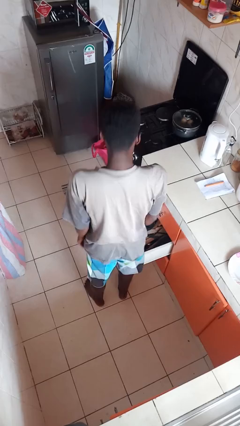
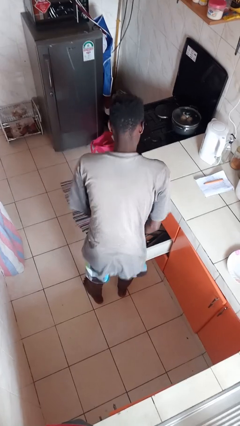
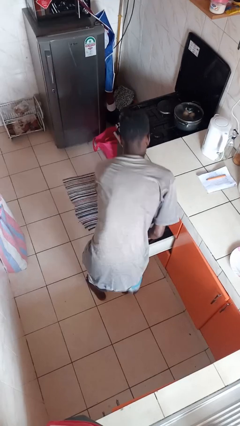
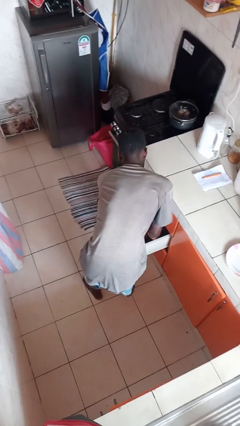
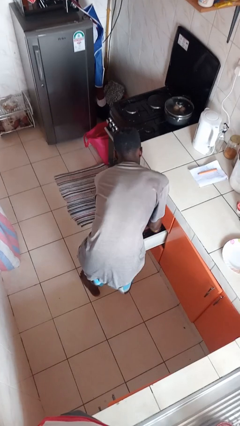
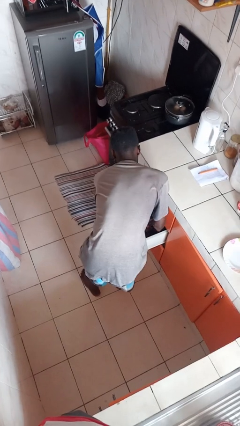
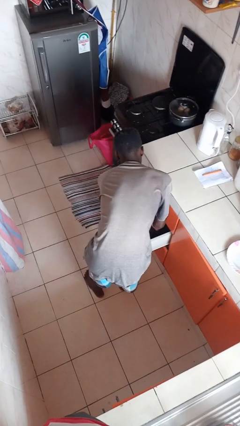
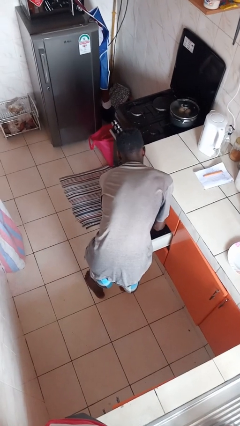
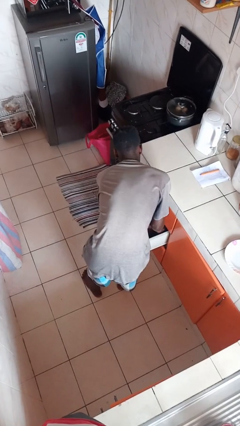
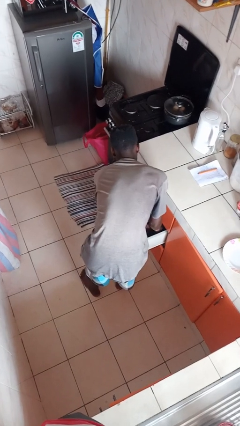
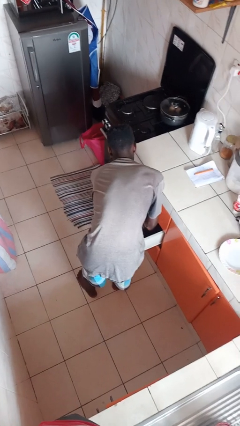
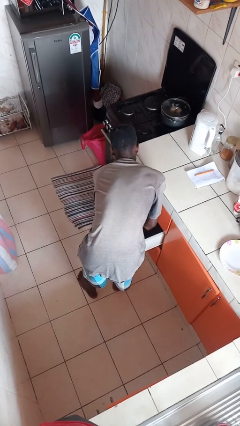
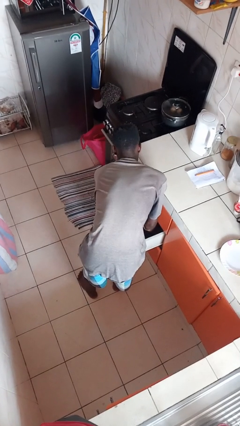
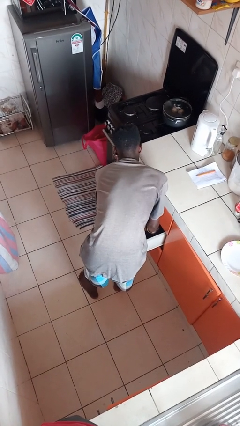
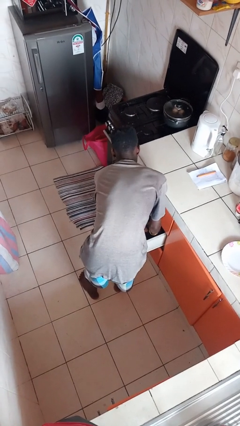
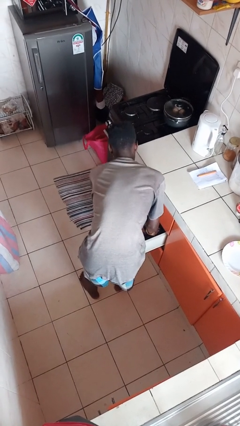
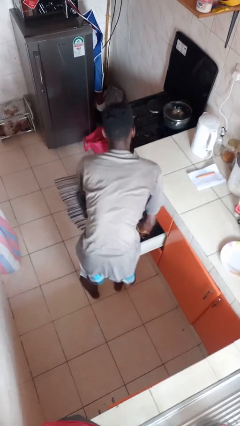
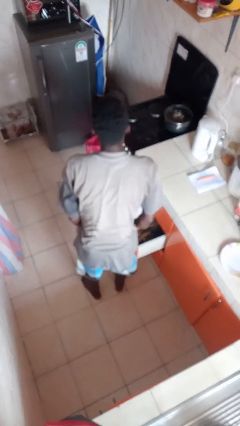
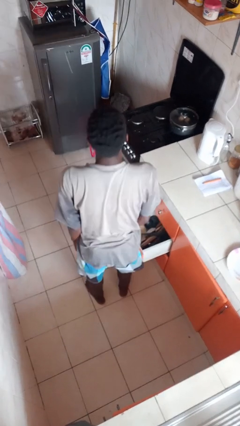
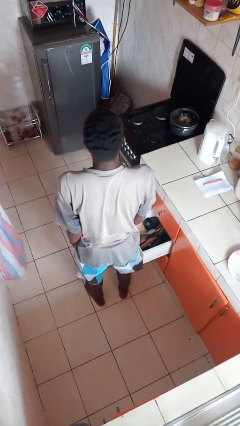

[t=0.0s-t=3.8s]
person searches in kitchen drawer

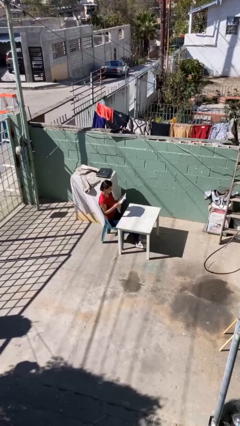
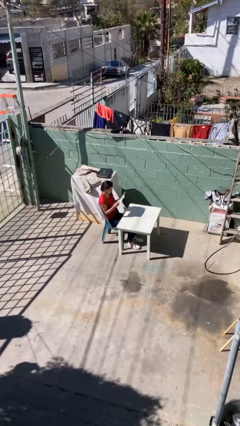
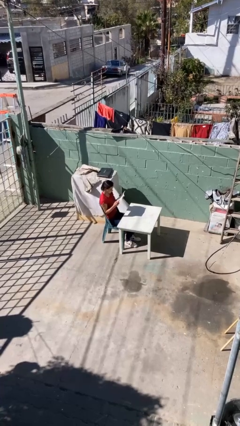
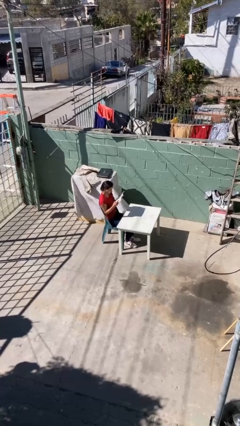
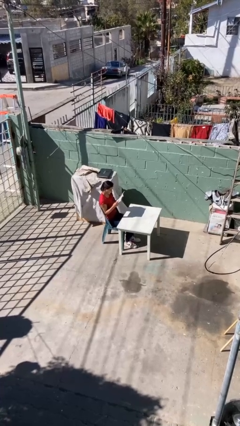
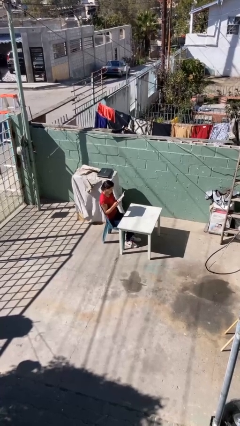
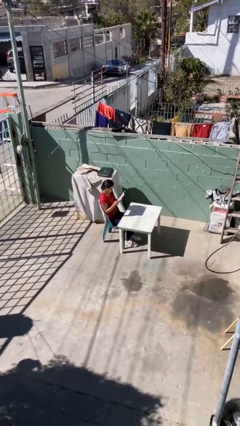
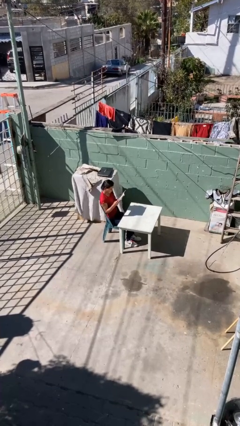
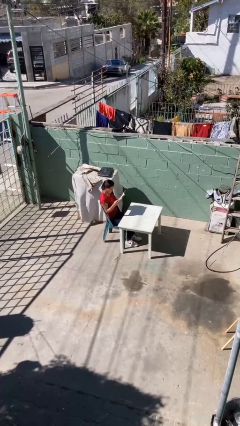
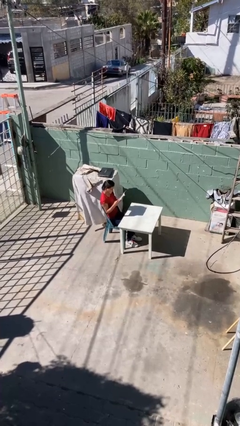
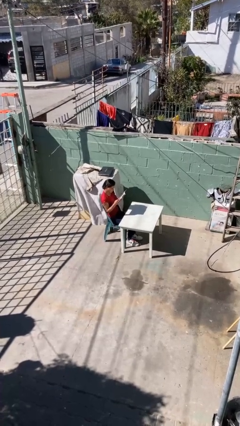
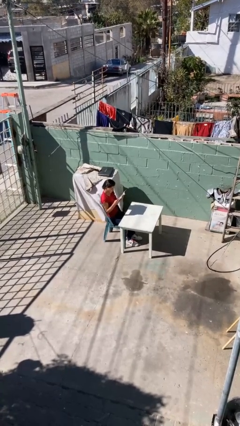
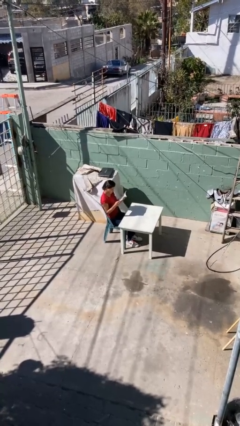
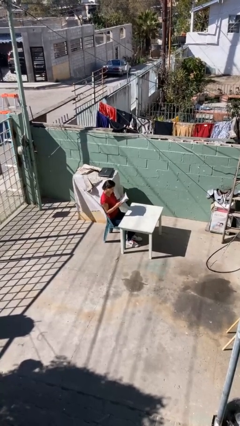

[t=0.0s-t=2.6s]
person reads document

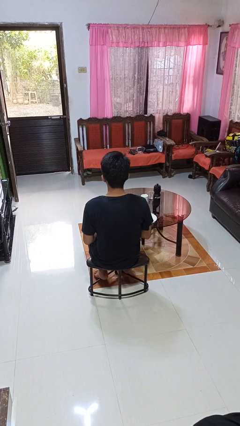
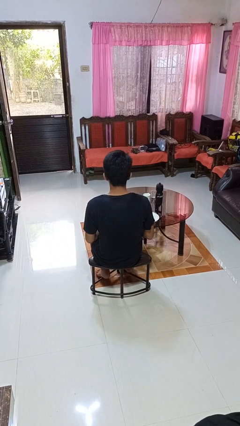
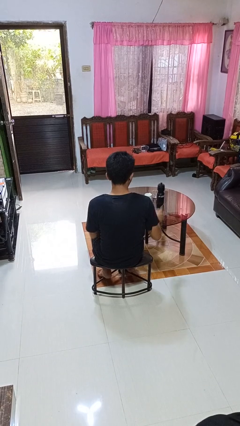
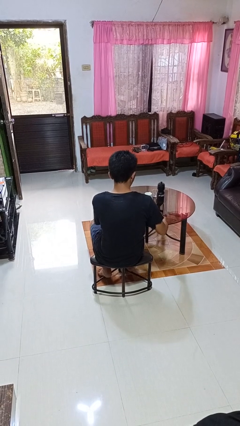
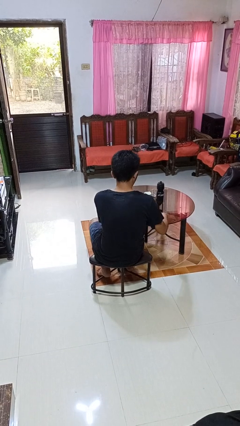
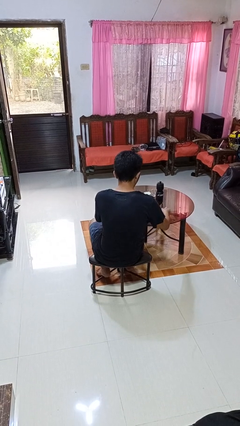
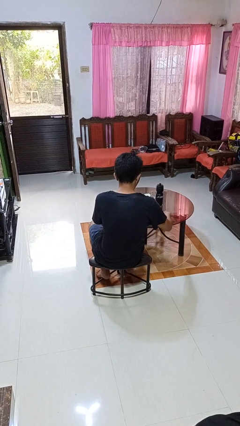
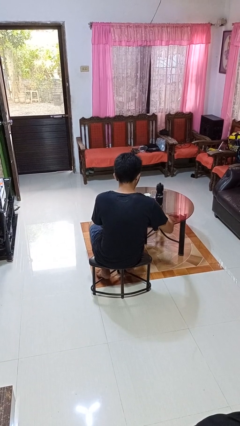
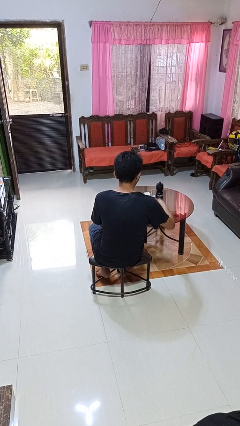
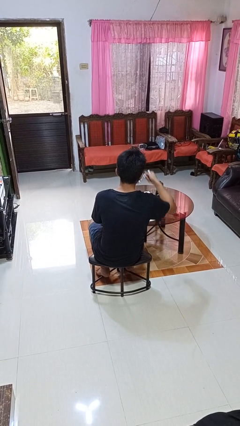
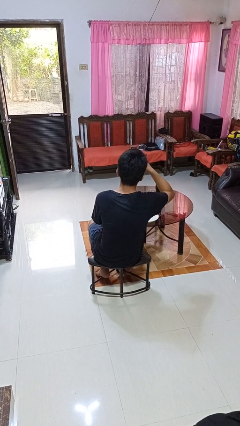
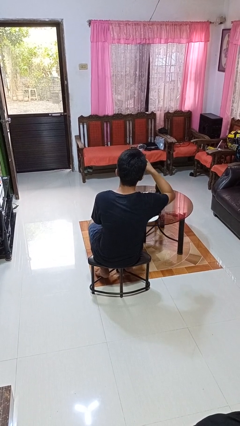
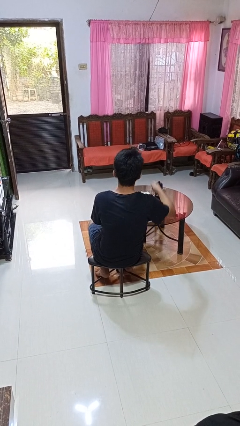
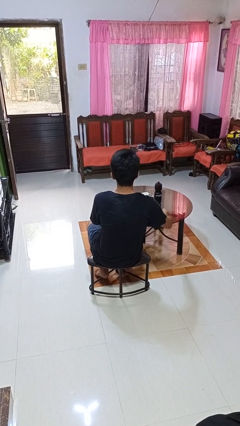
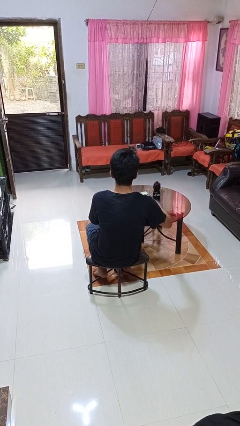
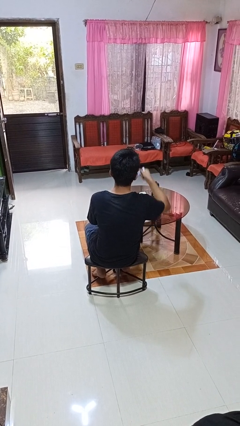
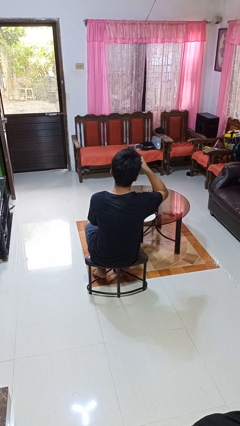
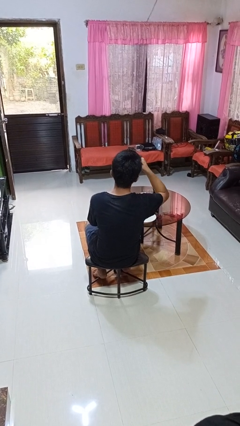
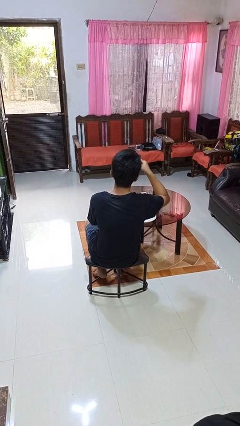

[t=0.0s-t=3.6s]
person eats with utensil

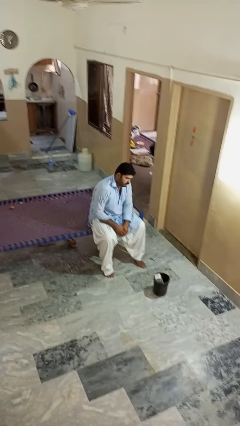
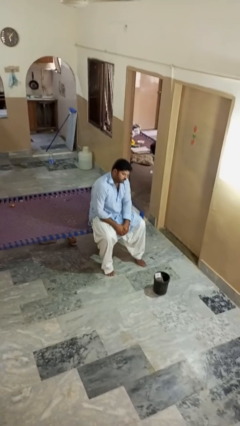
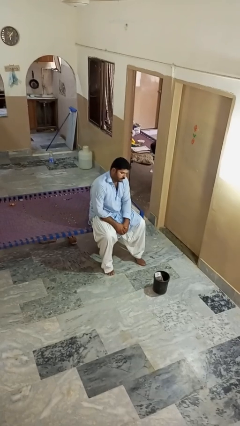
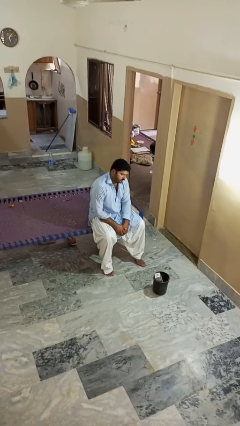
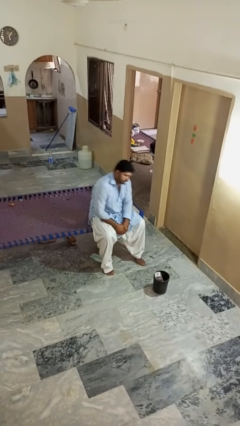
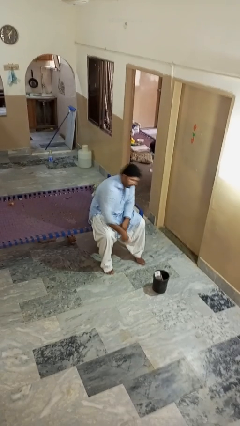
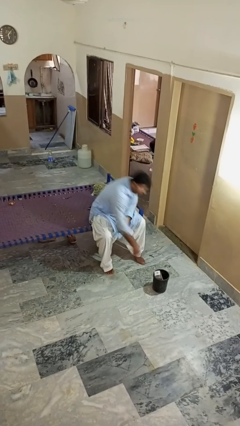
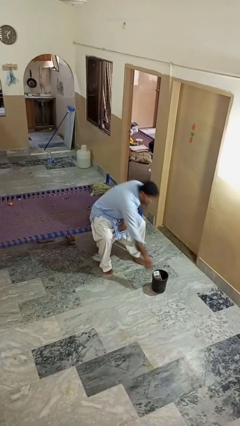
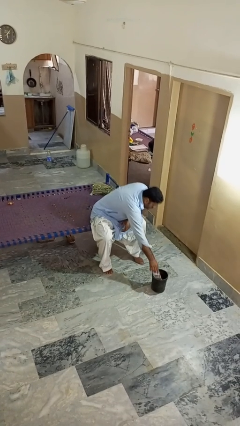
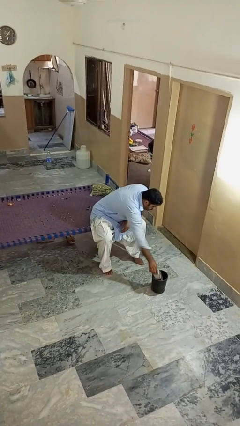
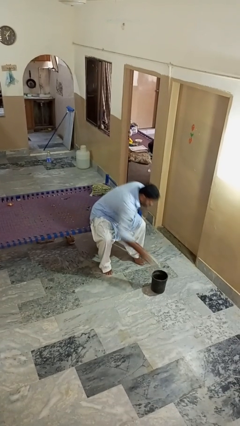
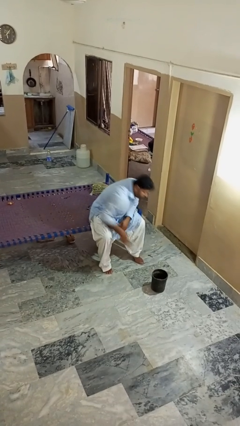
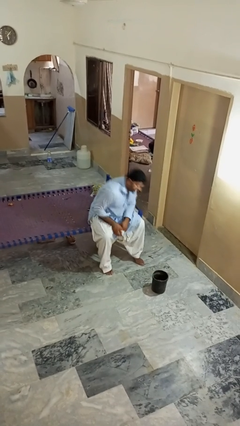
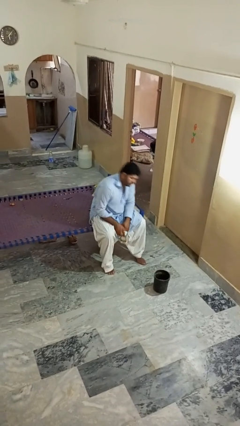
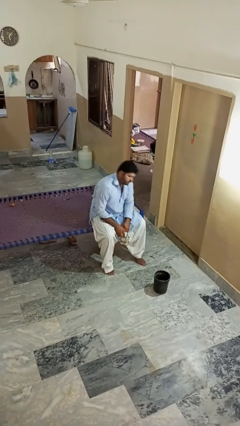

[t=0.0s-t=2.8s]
person takes object from basket

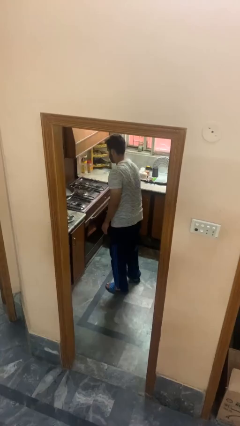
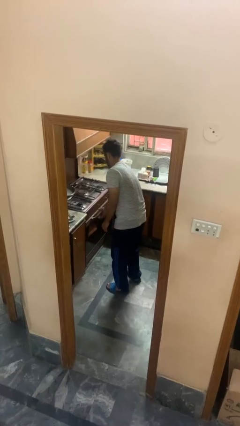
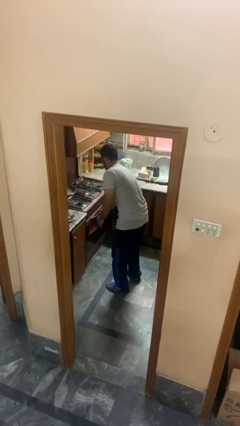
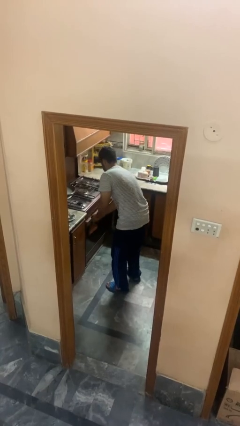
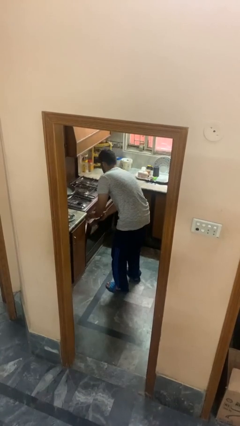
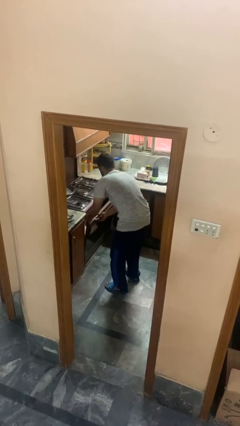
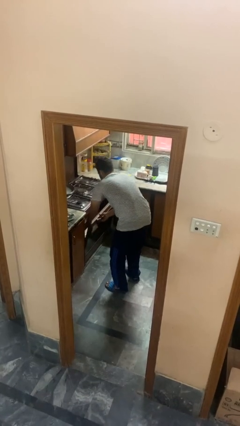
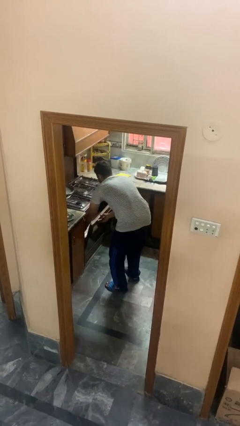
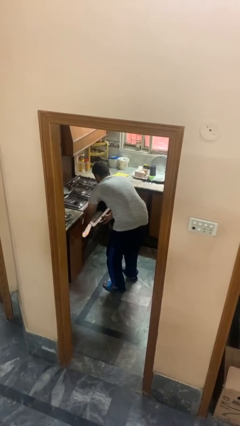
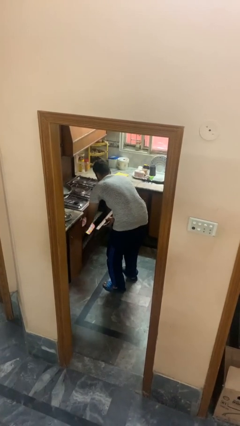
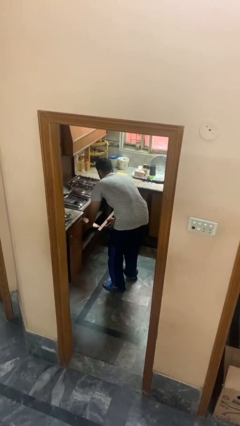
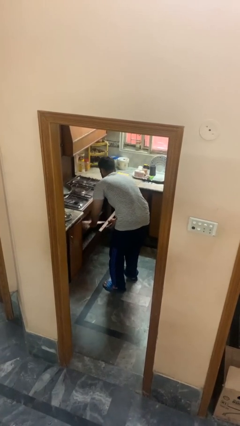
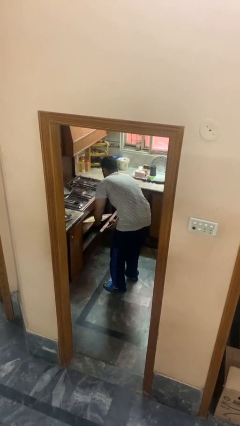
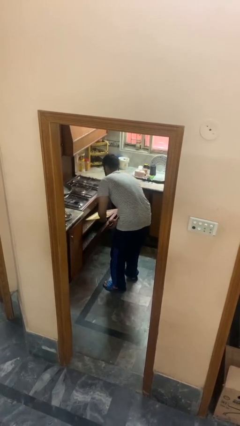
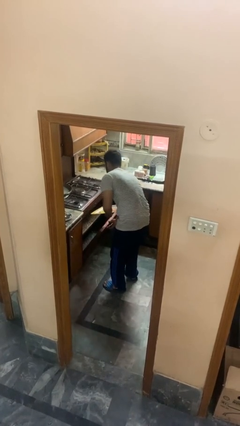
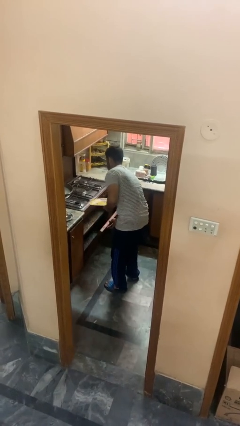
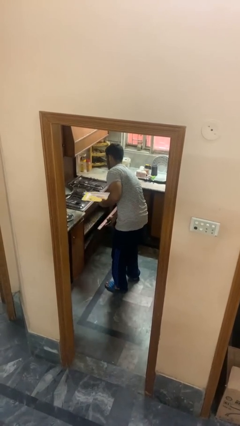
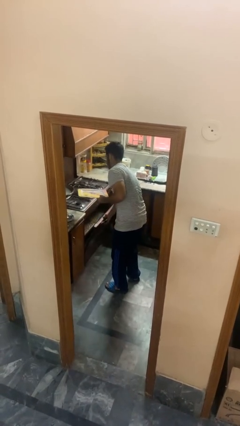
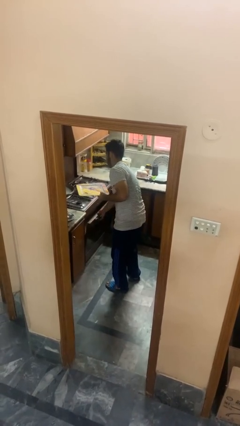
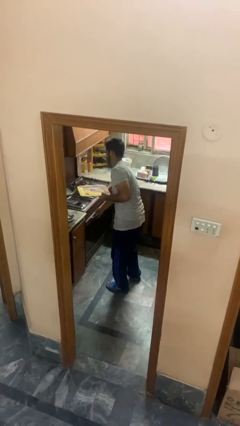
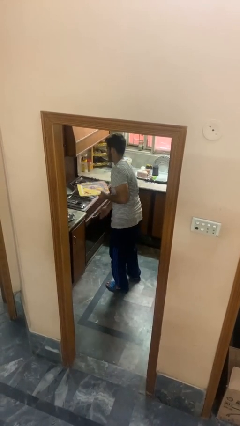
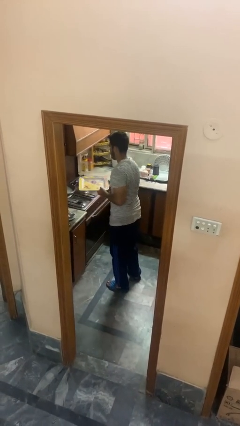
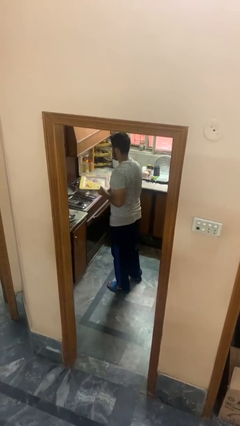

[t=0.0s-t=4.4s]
person takes object from oven

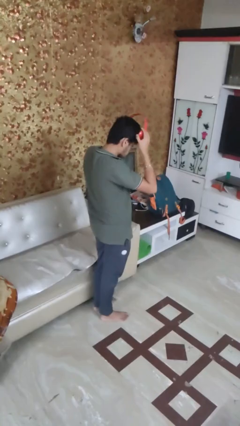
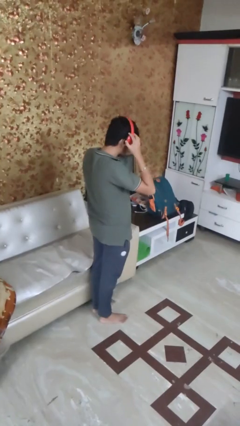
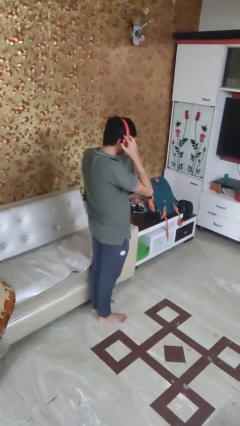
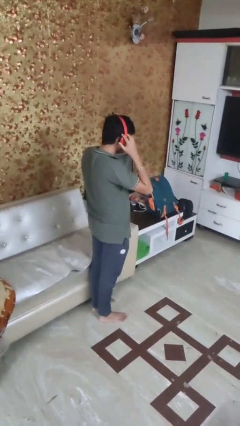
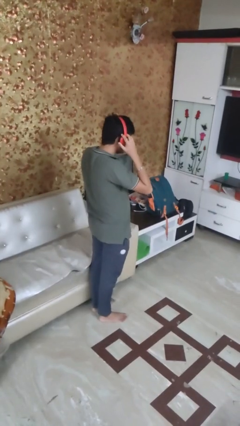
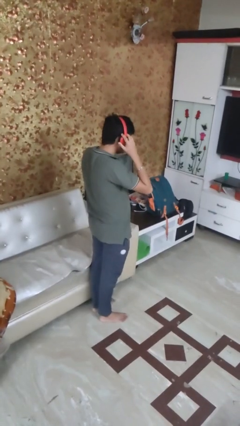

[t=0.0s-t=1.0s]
person puts on headphones
